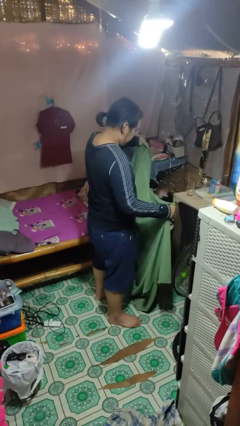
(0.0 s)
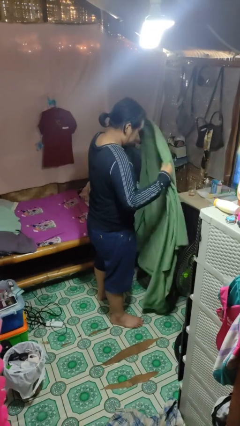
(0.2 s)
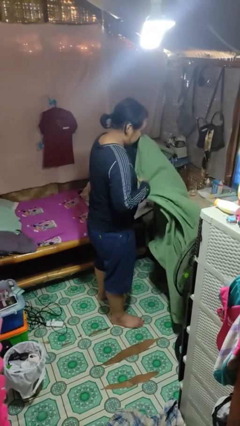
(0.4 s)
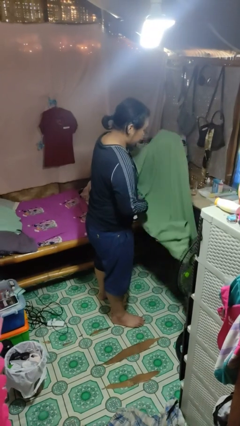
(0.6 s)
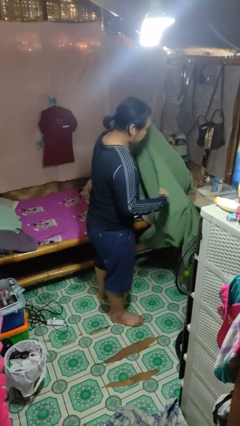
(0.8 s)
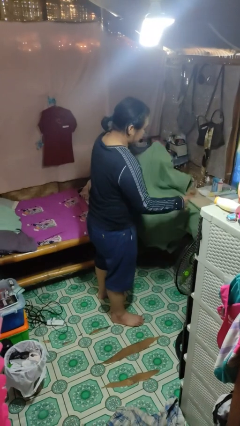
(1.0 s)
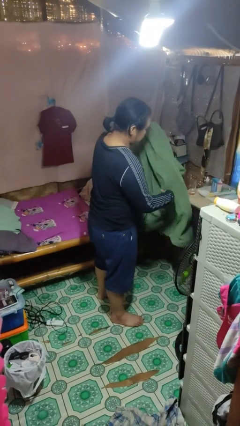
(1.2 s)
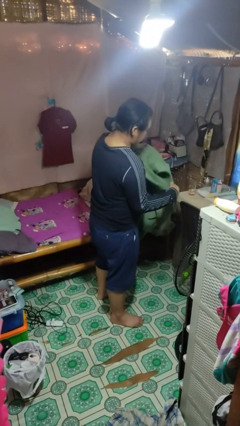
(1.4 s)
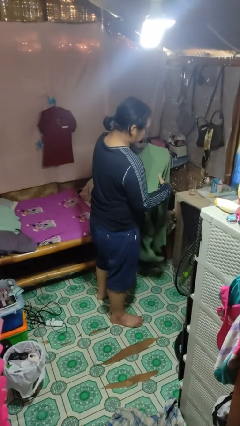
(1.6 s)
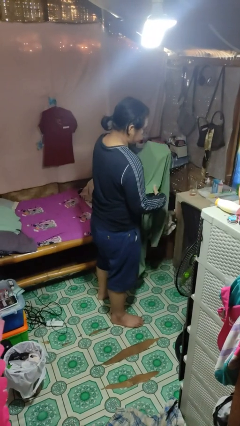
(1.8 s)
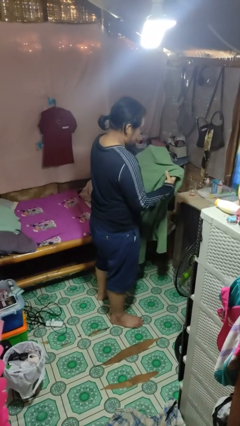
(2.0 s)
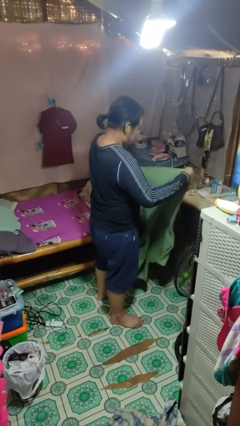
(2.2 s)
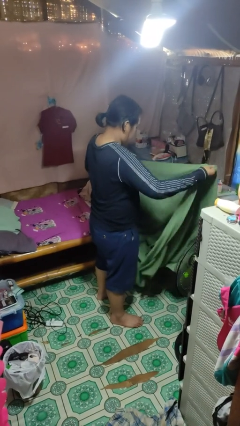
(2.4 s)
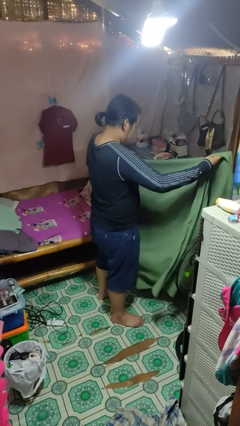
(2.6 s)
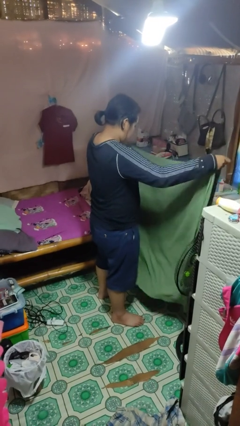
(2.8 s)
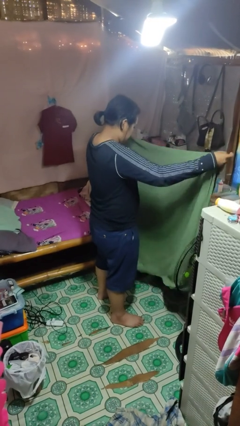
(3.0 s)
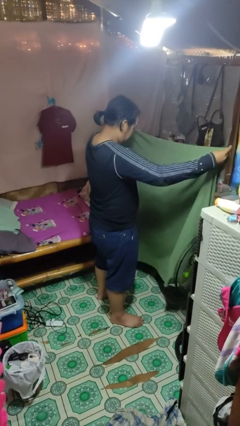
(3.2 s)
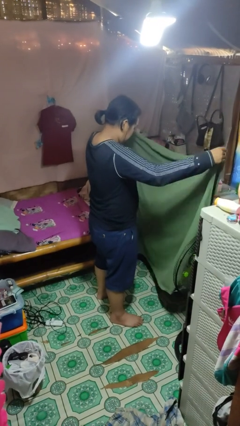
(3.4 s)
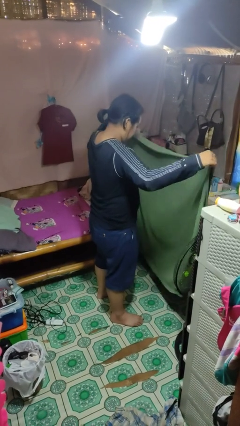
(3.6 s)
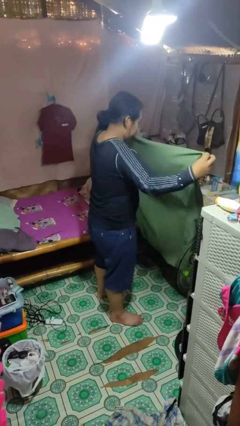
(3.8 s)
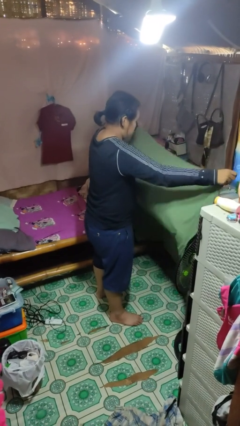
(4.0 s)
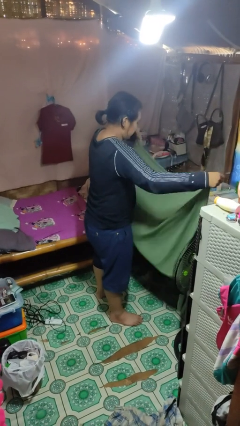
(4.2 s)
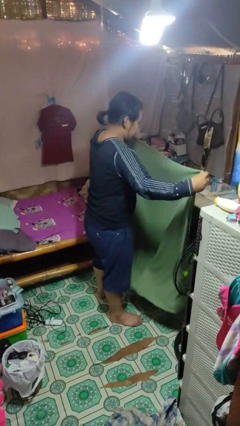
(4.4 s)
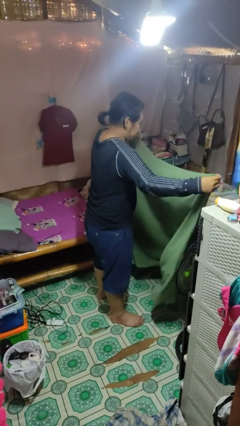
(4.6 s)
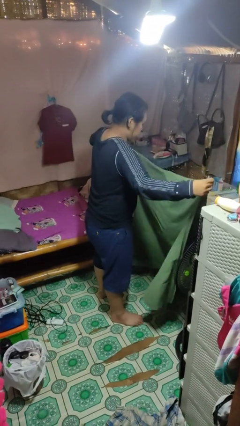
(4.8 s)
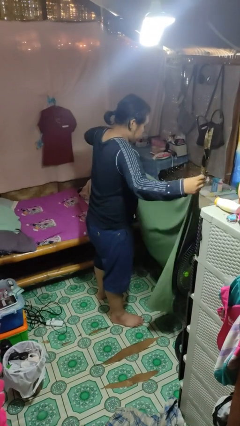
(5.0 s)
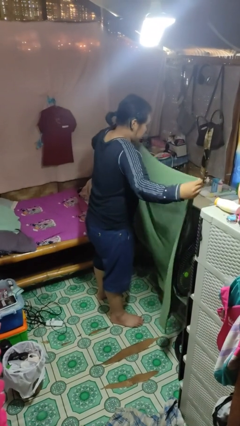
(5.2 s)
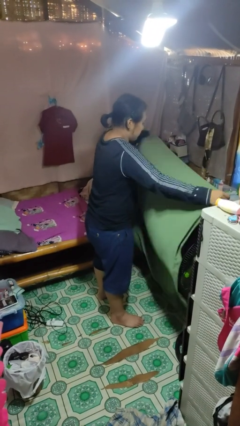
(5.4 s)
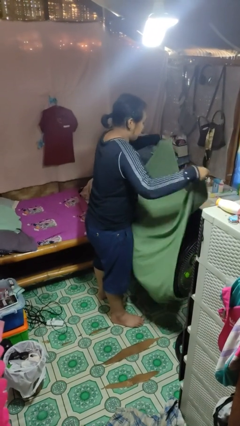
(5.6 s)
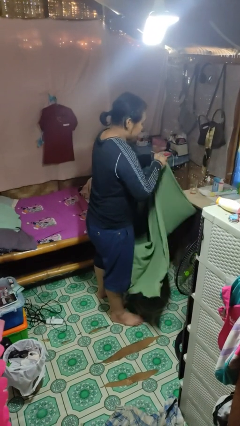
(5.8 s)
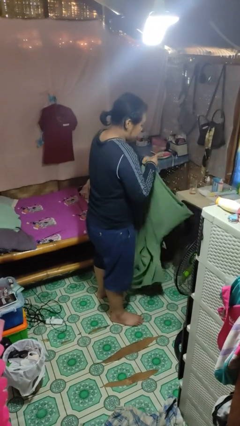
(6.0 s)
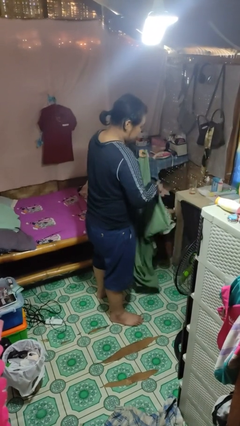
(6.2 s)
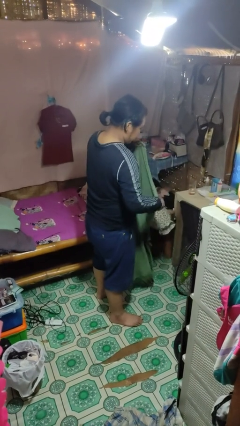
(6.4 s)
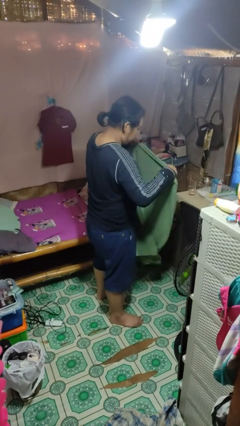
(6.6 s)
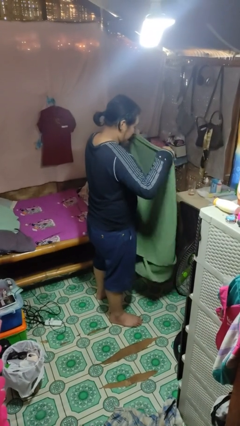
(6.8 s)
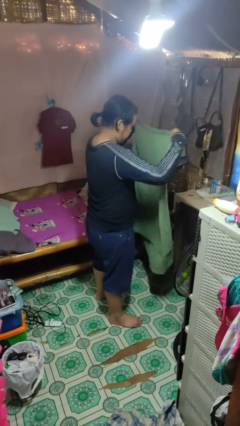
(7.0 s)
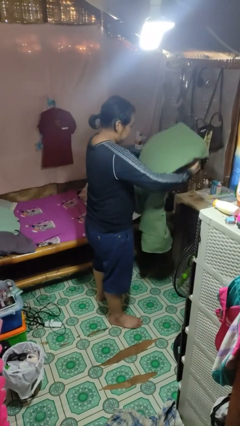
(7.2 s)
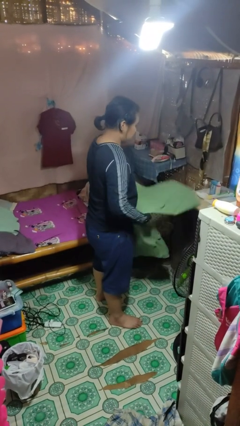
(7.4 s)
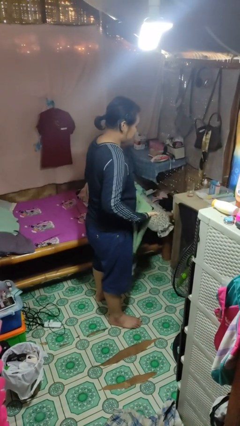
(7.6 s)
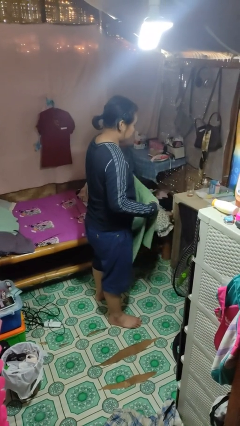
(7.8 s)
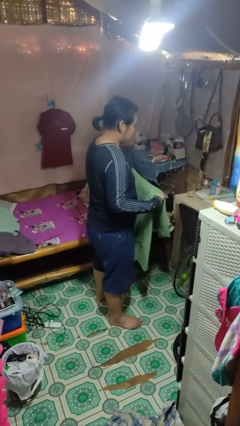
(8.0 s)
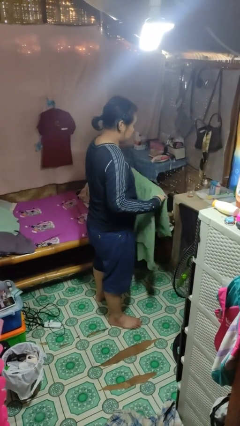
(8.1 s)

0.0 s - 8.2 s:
person folds blanket

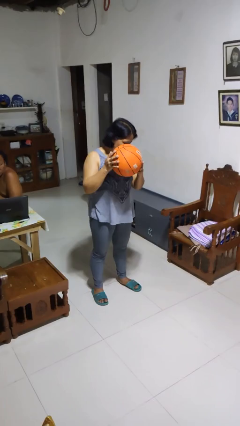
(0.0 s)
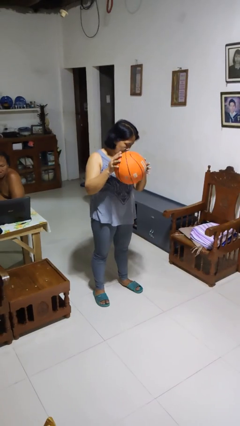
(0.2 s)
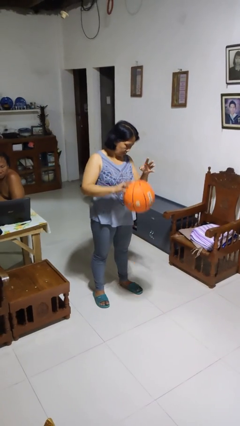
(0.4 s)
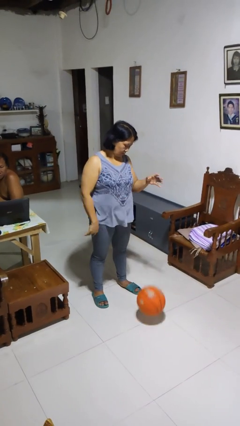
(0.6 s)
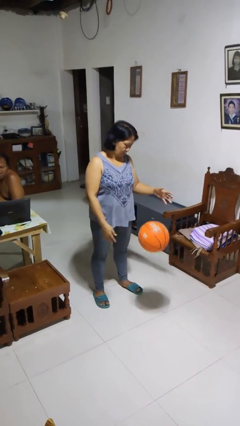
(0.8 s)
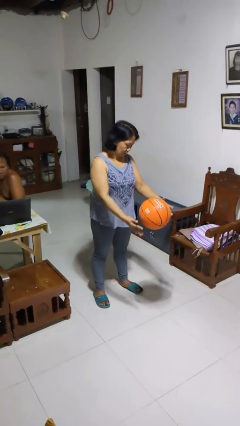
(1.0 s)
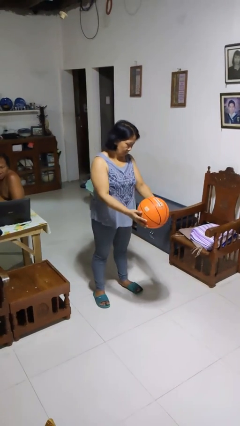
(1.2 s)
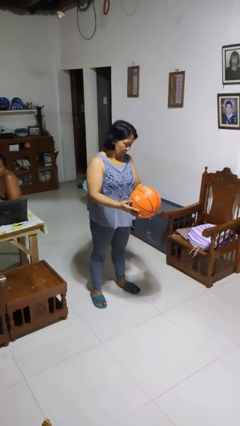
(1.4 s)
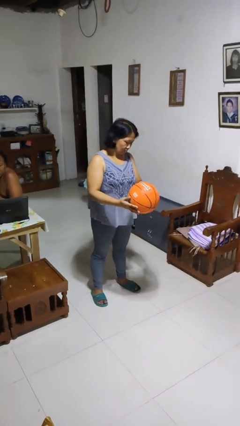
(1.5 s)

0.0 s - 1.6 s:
person bounces ball on floor

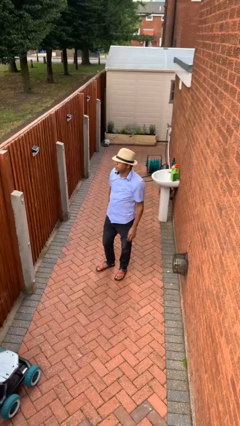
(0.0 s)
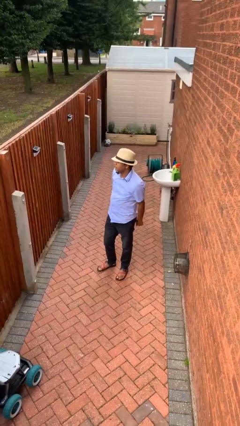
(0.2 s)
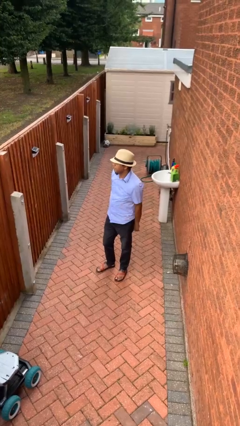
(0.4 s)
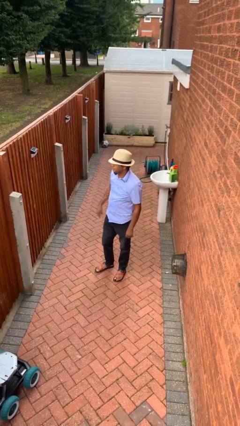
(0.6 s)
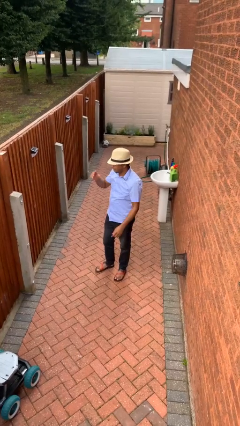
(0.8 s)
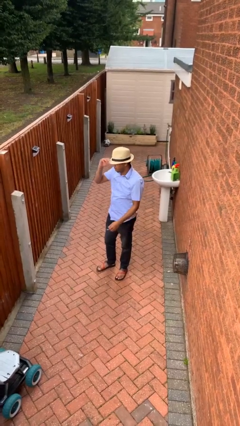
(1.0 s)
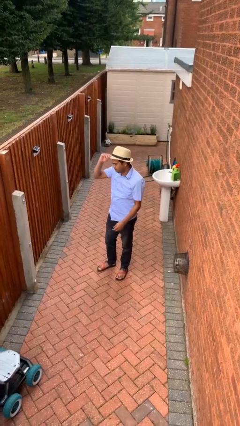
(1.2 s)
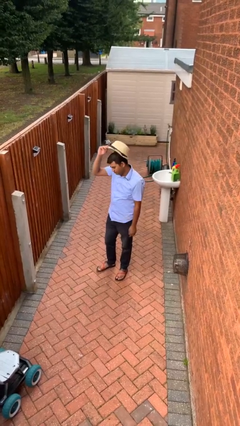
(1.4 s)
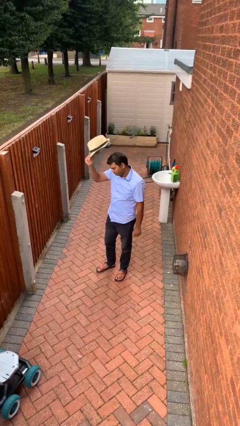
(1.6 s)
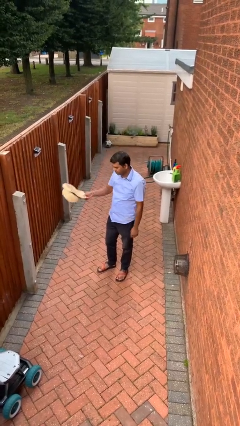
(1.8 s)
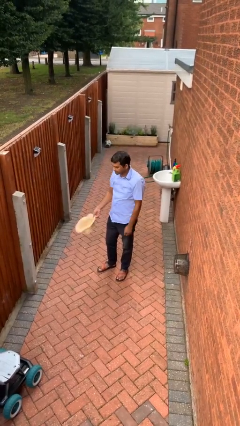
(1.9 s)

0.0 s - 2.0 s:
person takes off hat

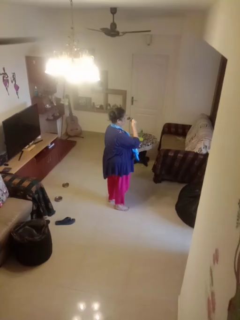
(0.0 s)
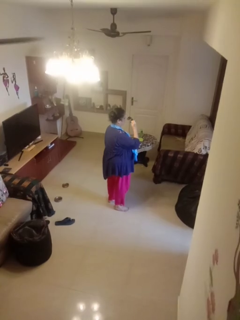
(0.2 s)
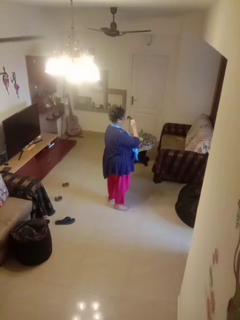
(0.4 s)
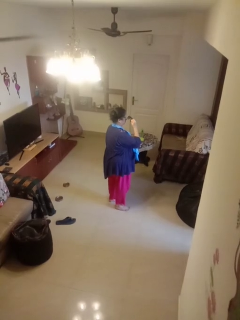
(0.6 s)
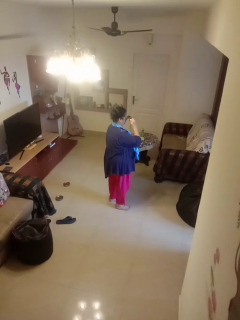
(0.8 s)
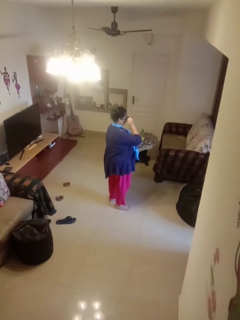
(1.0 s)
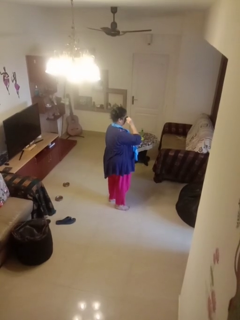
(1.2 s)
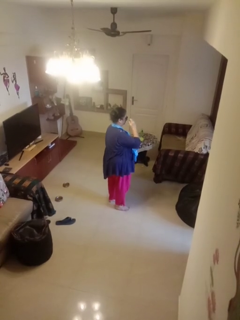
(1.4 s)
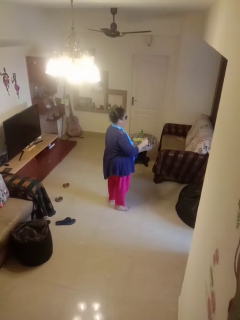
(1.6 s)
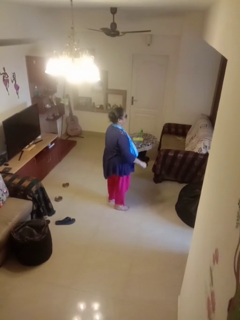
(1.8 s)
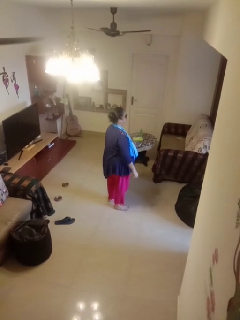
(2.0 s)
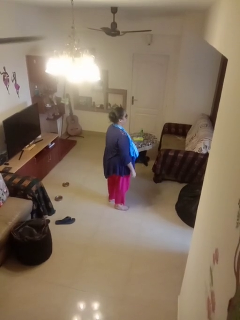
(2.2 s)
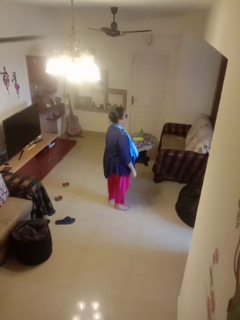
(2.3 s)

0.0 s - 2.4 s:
person puts on sunglasses

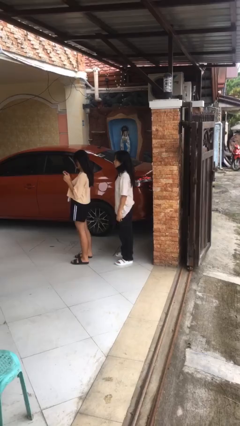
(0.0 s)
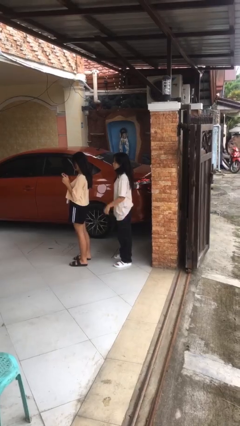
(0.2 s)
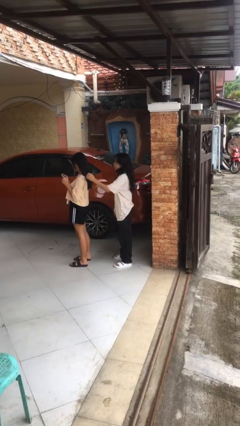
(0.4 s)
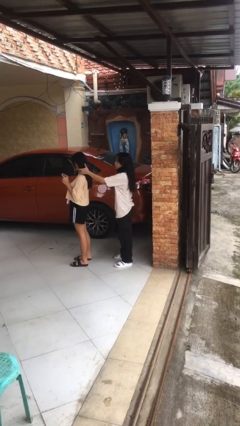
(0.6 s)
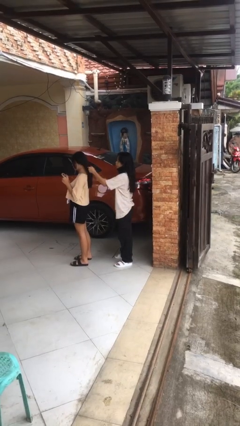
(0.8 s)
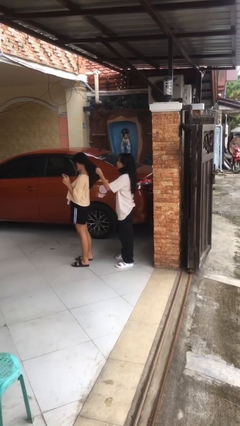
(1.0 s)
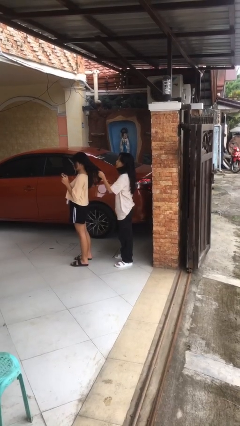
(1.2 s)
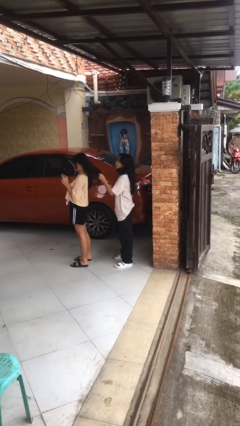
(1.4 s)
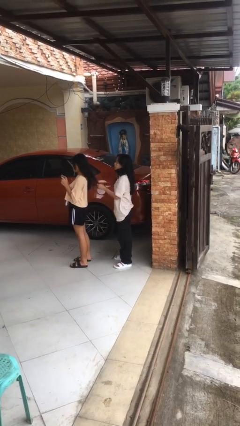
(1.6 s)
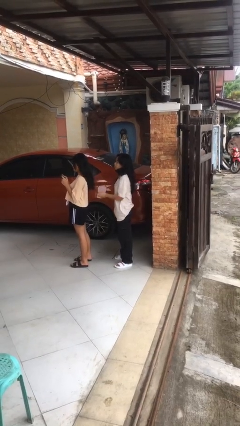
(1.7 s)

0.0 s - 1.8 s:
person grabs person by hair

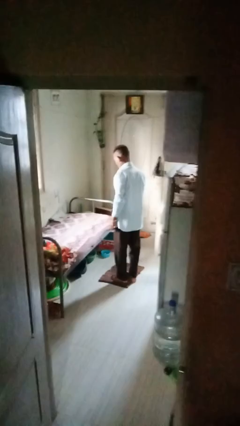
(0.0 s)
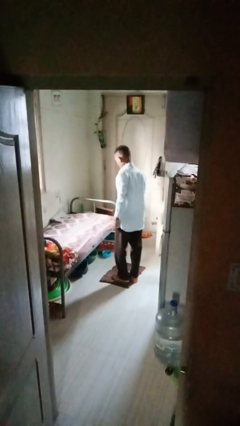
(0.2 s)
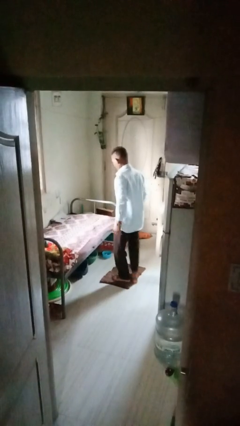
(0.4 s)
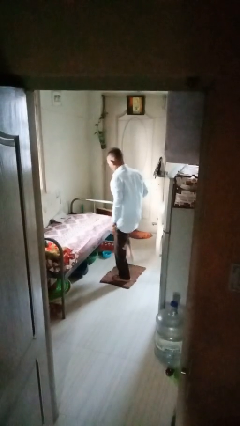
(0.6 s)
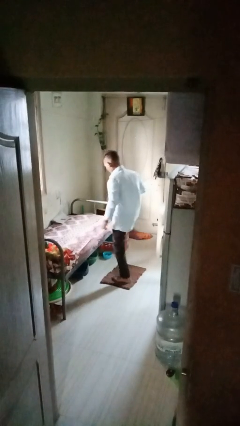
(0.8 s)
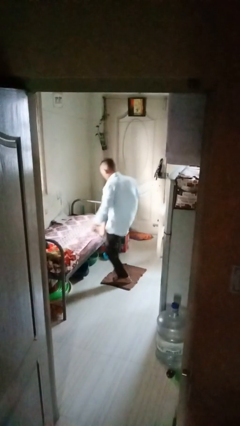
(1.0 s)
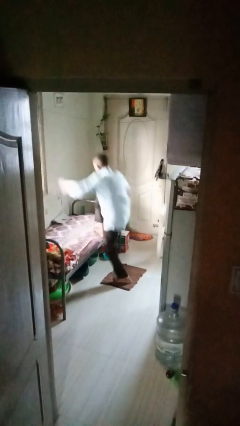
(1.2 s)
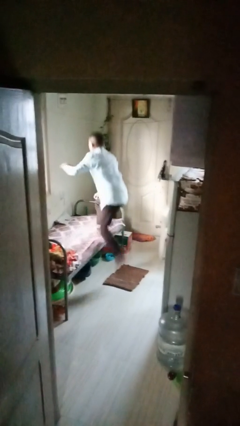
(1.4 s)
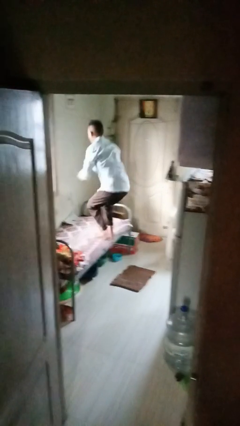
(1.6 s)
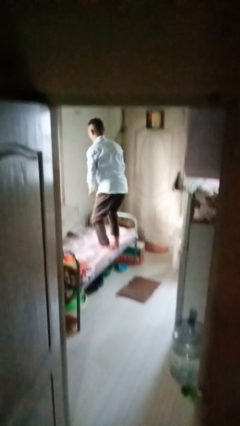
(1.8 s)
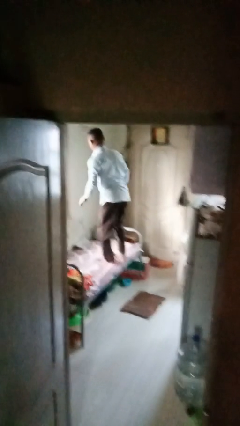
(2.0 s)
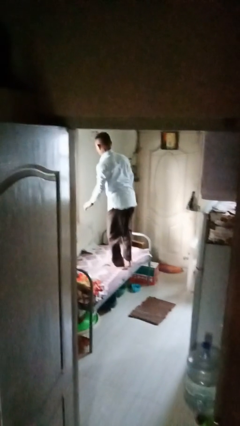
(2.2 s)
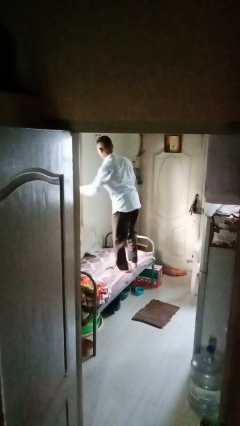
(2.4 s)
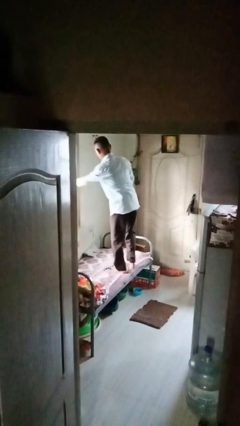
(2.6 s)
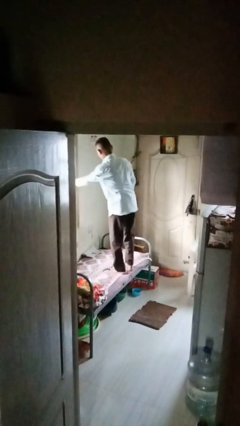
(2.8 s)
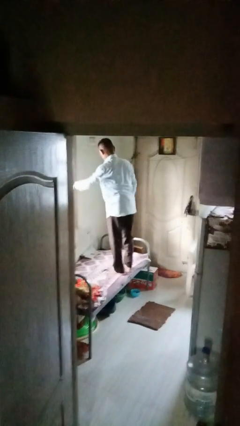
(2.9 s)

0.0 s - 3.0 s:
person jumps on bed
